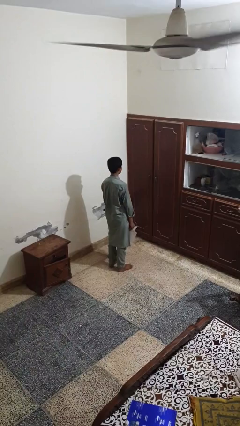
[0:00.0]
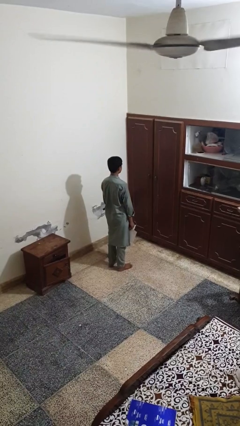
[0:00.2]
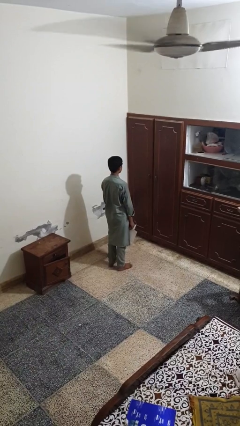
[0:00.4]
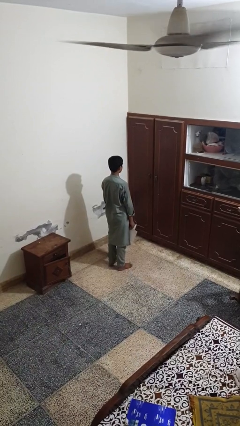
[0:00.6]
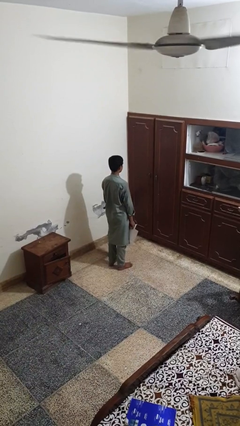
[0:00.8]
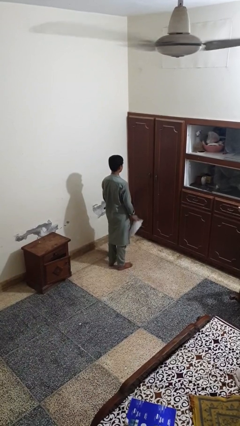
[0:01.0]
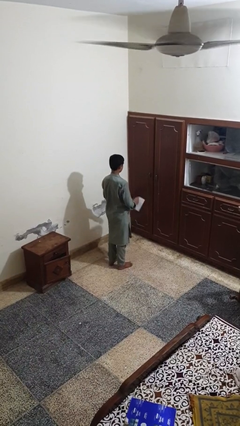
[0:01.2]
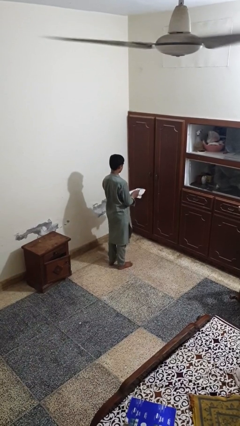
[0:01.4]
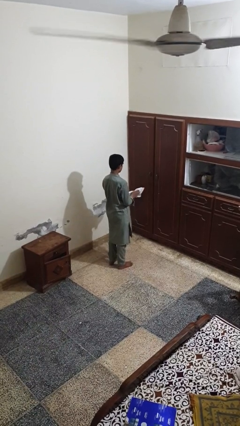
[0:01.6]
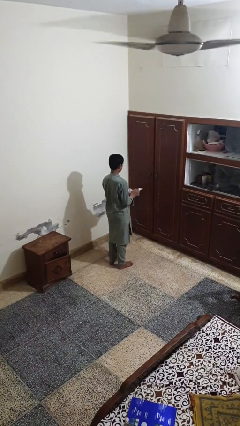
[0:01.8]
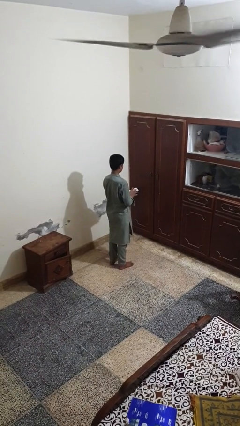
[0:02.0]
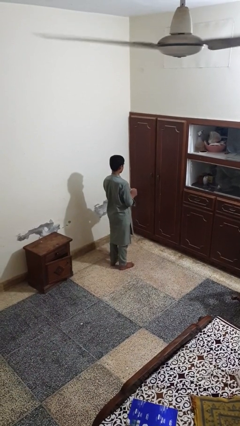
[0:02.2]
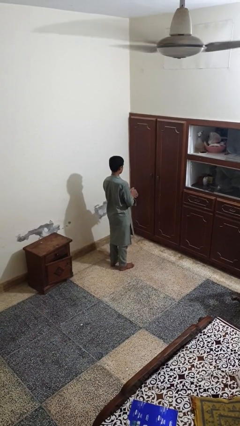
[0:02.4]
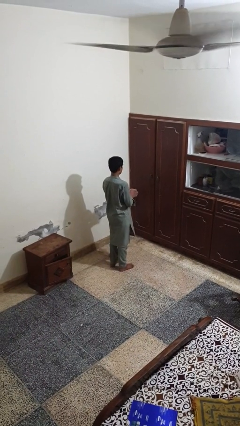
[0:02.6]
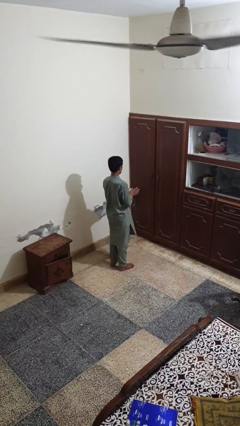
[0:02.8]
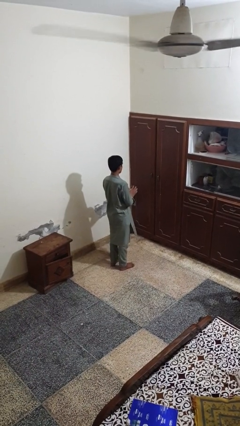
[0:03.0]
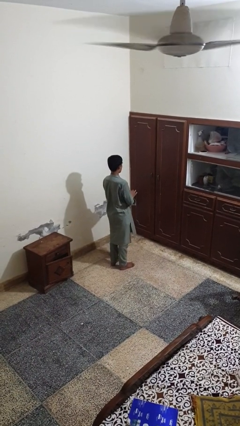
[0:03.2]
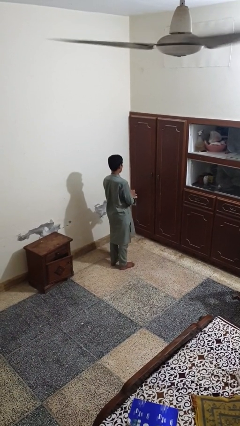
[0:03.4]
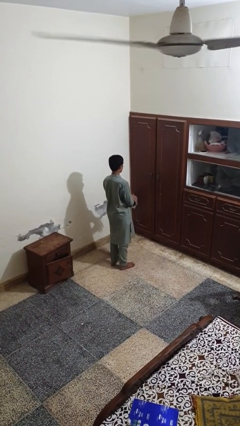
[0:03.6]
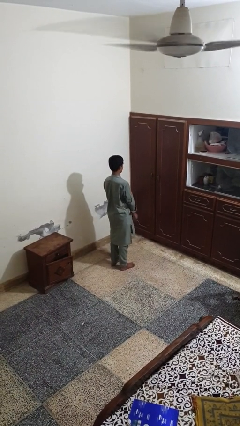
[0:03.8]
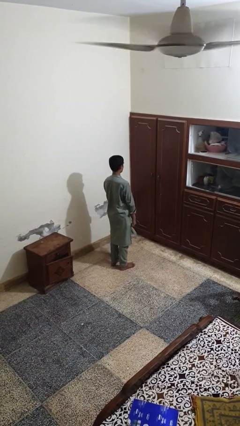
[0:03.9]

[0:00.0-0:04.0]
person crumples paper

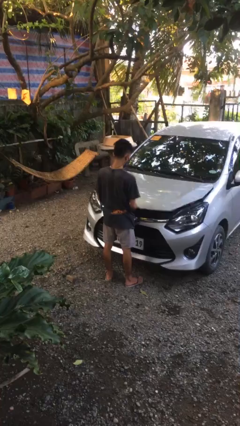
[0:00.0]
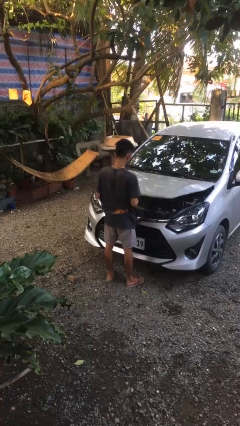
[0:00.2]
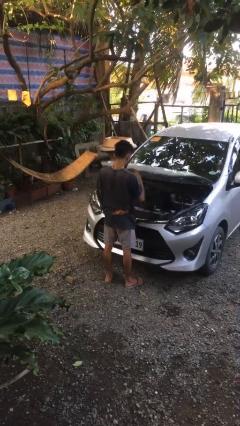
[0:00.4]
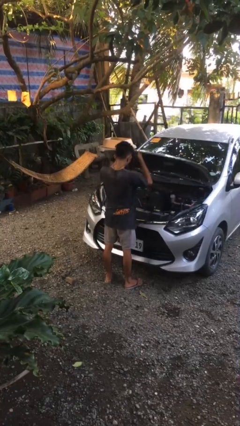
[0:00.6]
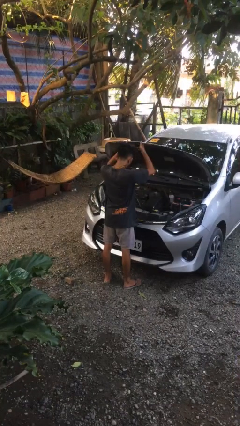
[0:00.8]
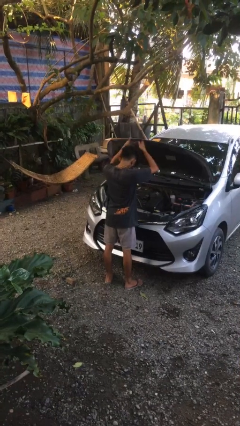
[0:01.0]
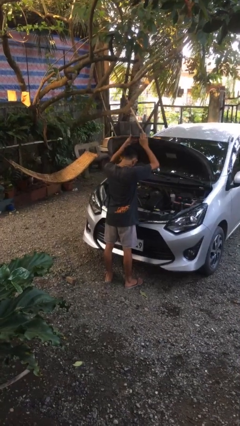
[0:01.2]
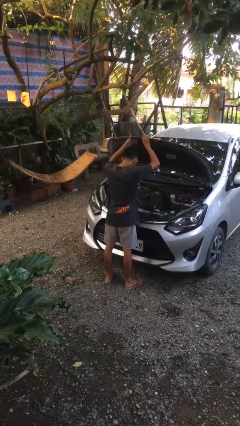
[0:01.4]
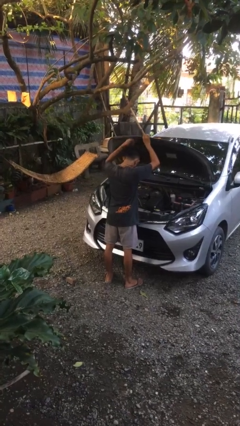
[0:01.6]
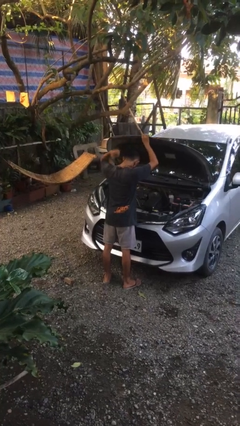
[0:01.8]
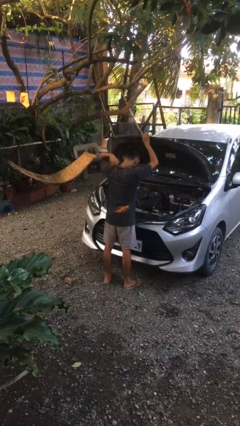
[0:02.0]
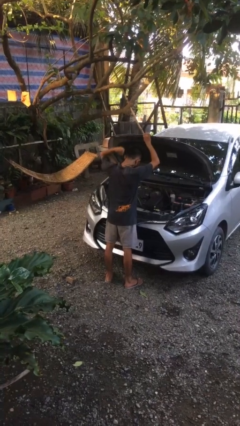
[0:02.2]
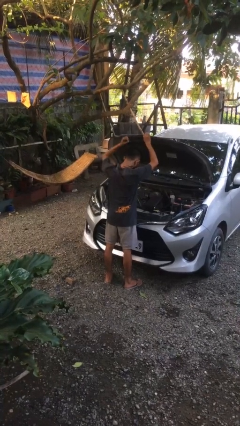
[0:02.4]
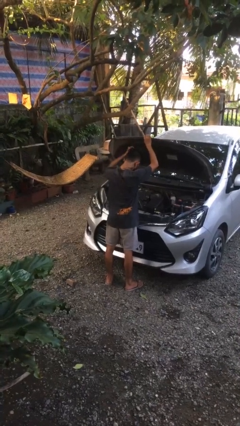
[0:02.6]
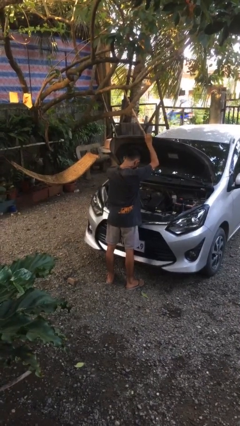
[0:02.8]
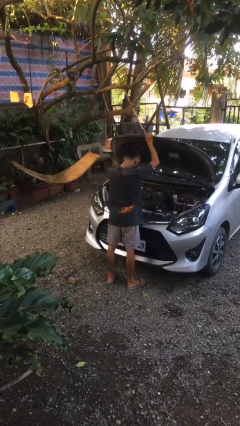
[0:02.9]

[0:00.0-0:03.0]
person opens car hood

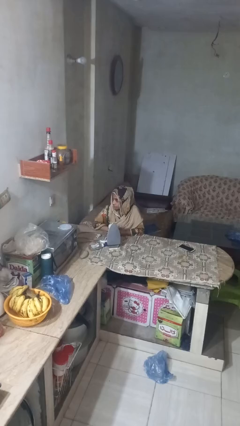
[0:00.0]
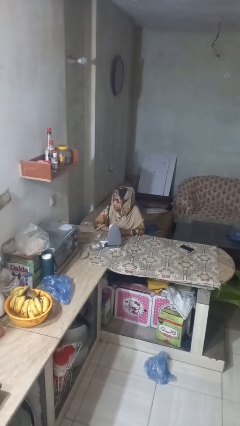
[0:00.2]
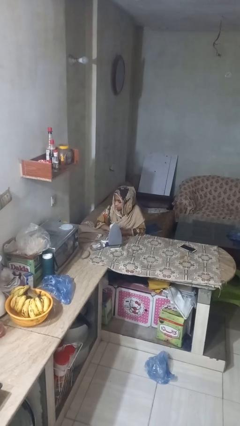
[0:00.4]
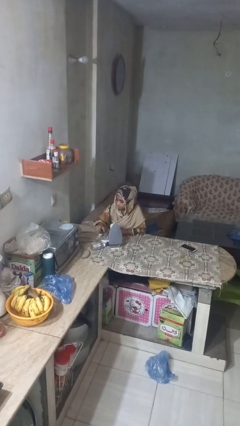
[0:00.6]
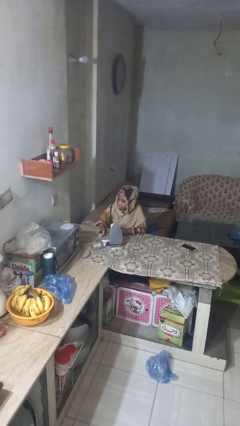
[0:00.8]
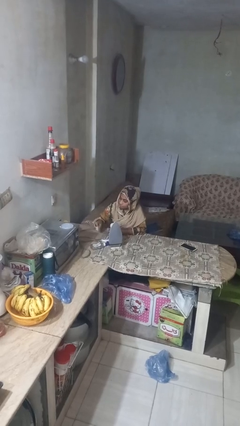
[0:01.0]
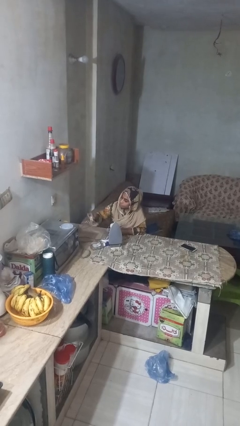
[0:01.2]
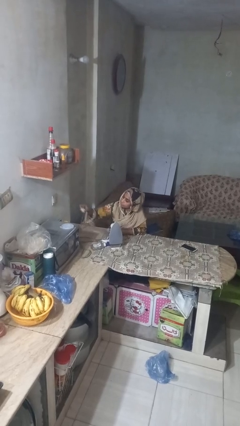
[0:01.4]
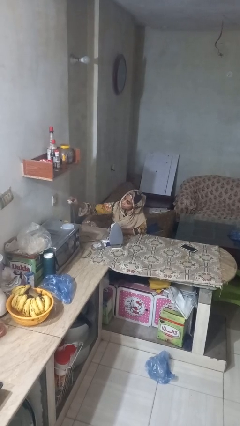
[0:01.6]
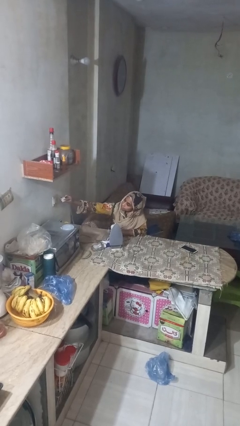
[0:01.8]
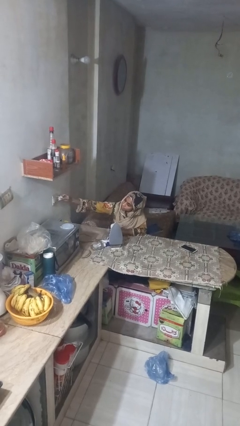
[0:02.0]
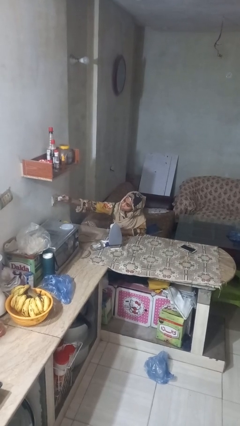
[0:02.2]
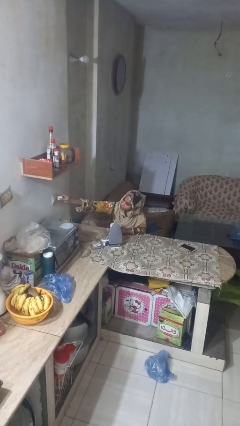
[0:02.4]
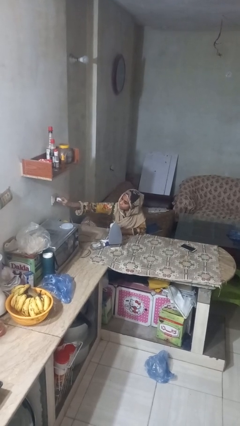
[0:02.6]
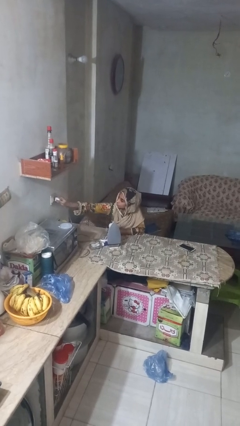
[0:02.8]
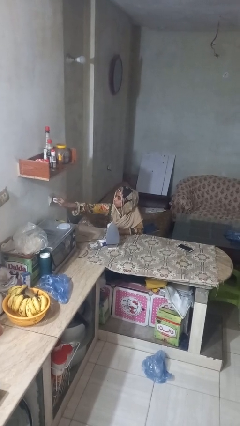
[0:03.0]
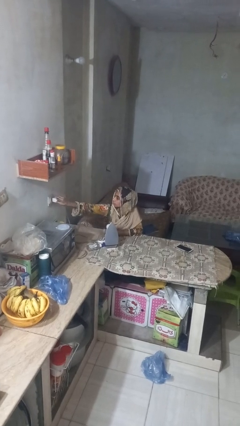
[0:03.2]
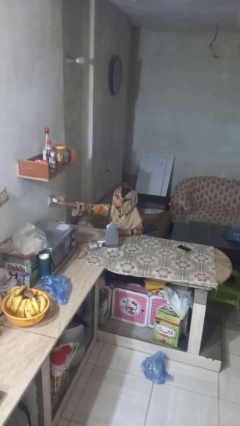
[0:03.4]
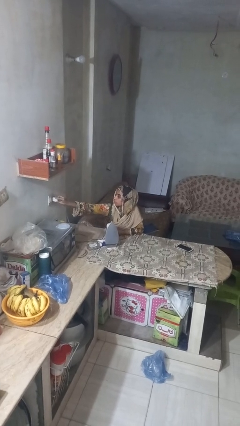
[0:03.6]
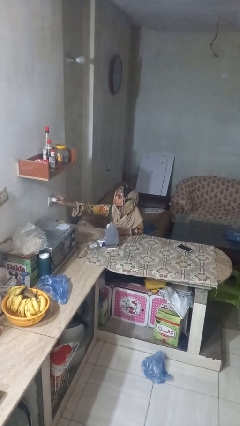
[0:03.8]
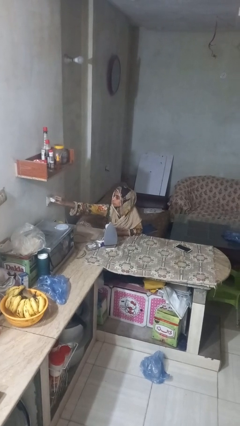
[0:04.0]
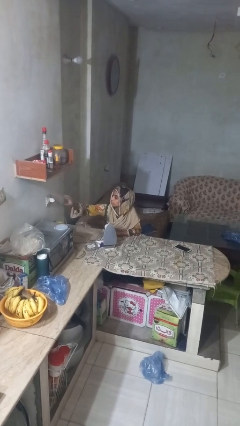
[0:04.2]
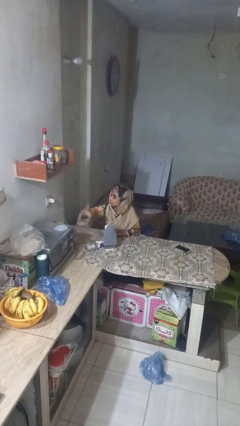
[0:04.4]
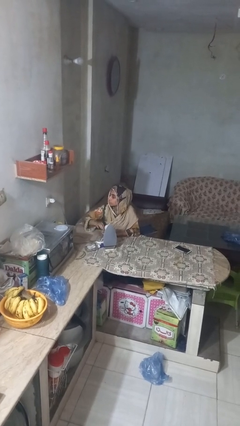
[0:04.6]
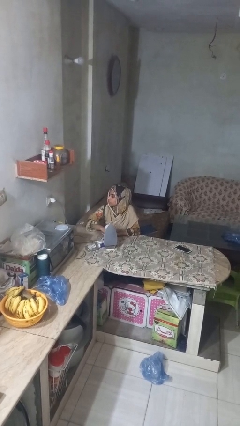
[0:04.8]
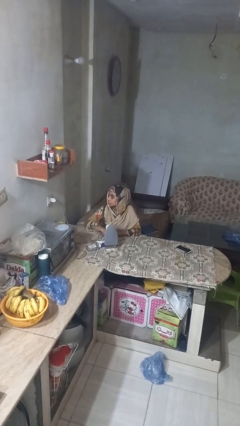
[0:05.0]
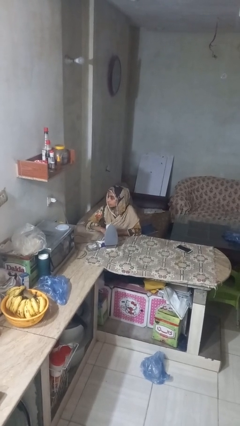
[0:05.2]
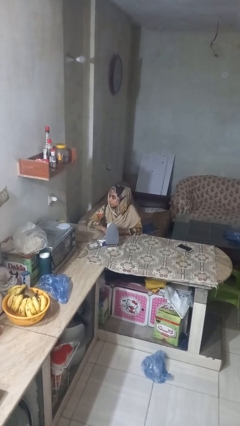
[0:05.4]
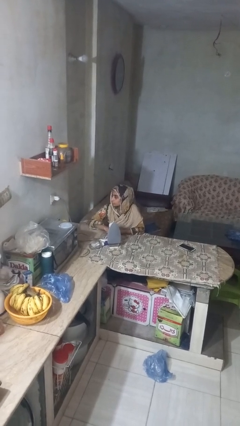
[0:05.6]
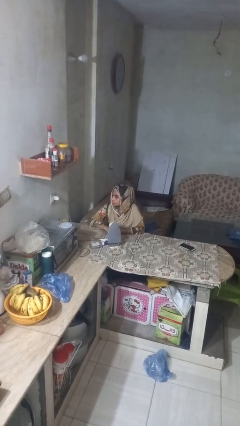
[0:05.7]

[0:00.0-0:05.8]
person plugs into electrical socket

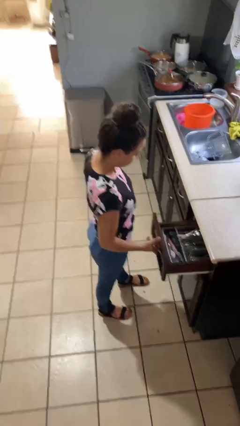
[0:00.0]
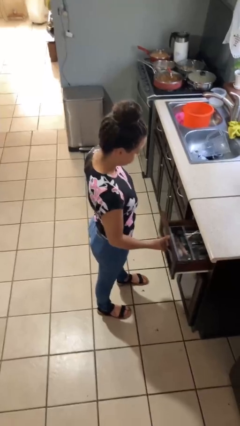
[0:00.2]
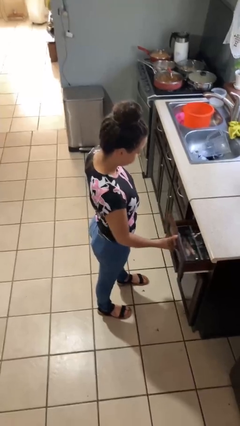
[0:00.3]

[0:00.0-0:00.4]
person closes kitchen drawer

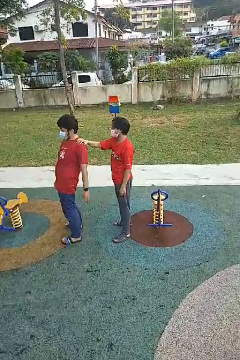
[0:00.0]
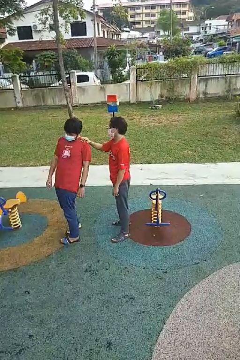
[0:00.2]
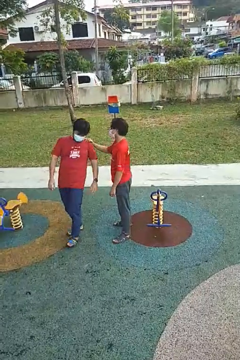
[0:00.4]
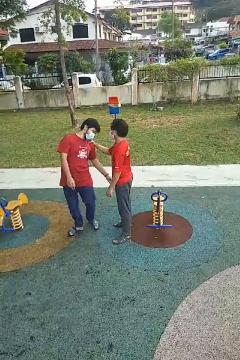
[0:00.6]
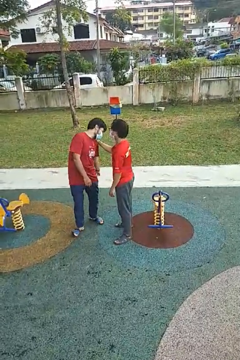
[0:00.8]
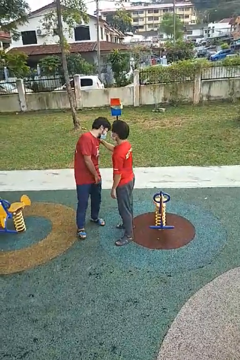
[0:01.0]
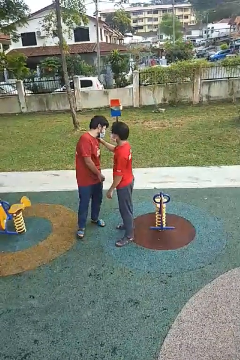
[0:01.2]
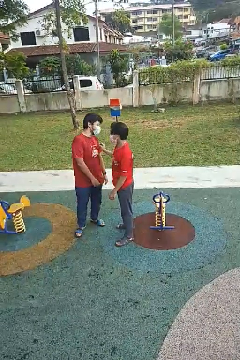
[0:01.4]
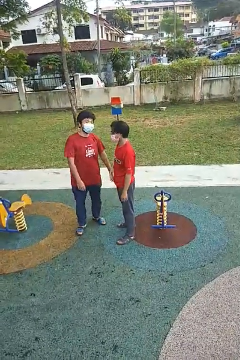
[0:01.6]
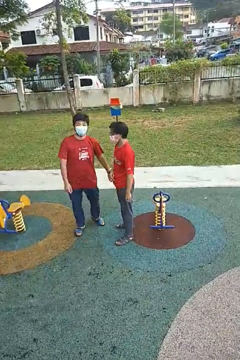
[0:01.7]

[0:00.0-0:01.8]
person spins person around

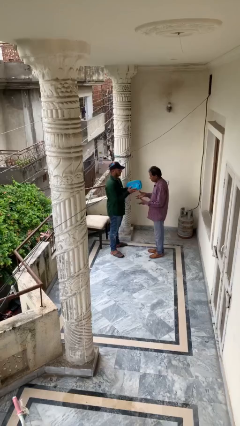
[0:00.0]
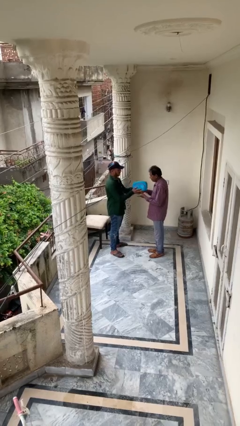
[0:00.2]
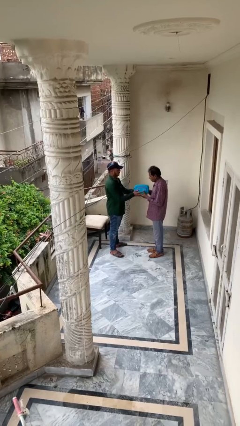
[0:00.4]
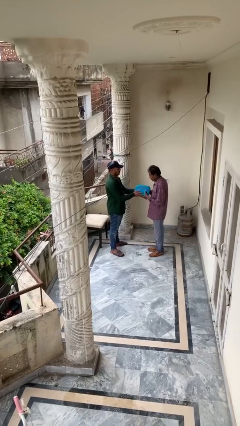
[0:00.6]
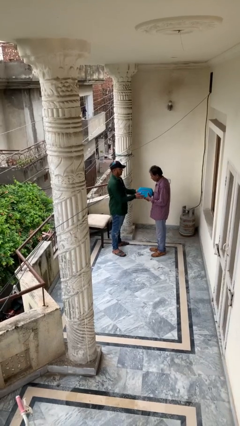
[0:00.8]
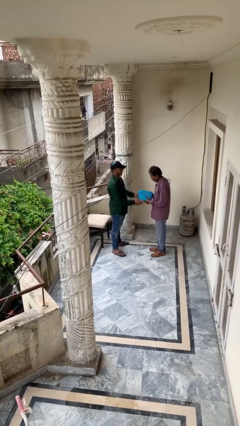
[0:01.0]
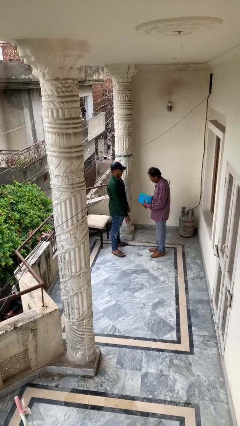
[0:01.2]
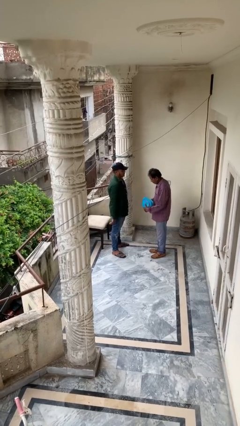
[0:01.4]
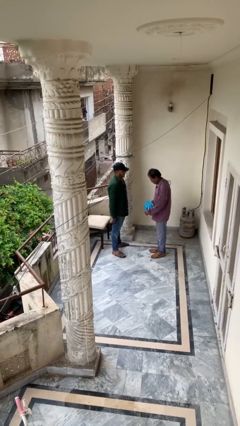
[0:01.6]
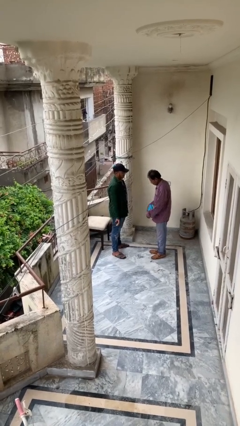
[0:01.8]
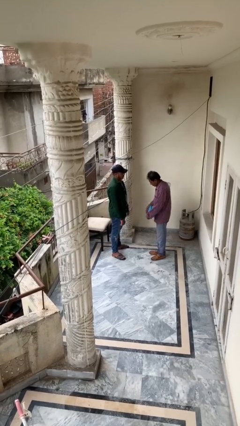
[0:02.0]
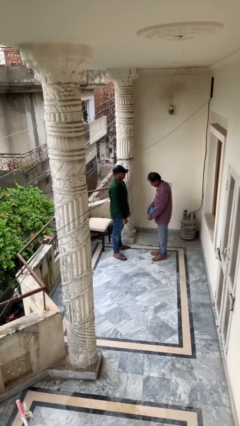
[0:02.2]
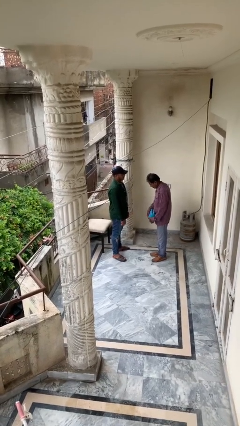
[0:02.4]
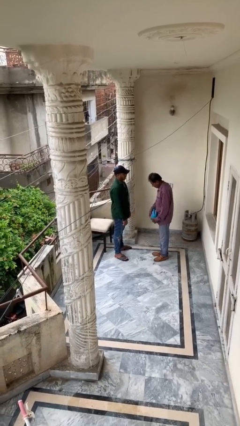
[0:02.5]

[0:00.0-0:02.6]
person transfers object to person
